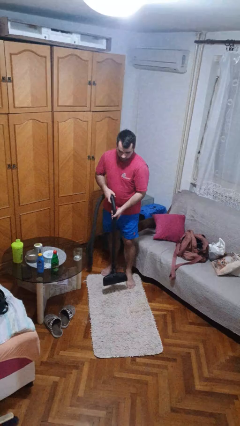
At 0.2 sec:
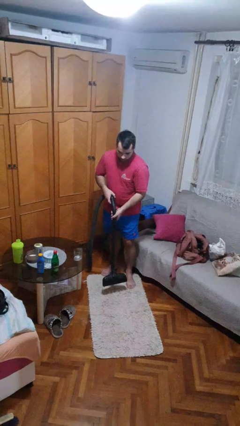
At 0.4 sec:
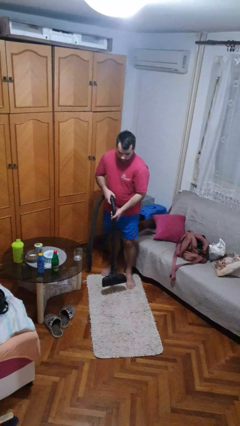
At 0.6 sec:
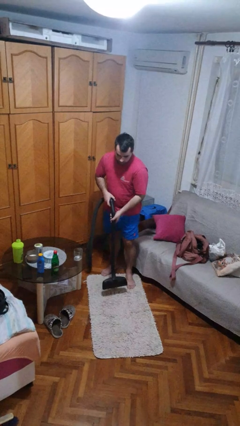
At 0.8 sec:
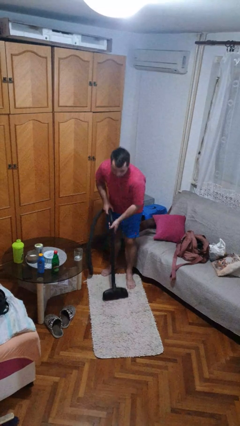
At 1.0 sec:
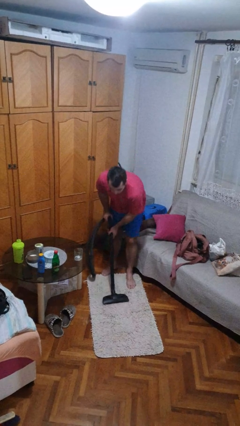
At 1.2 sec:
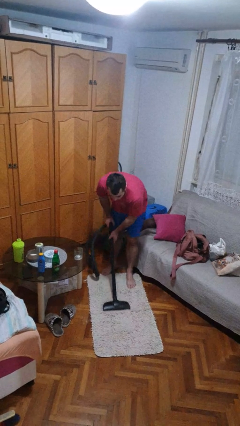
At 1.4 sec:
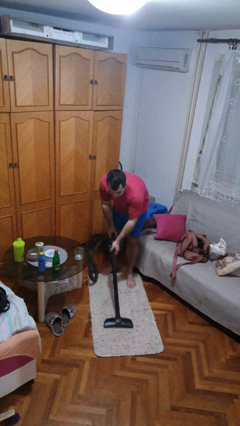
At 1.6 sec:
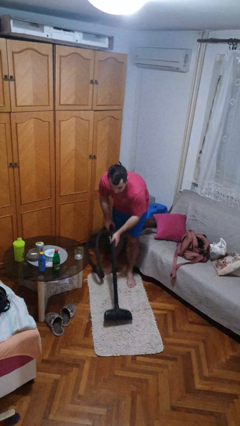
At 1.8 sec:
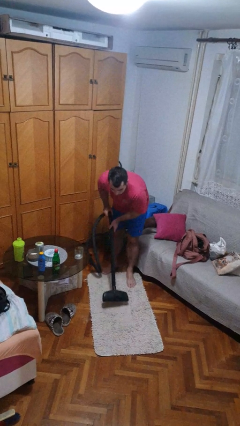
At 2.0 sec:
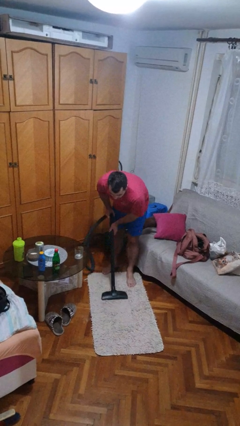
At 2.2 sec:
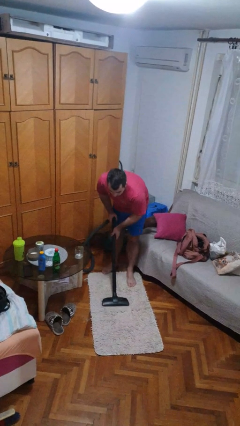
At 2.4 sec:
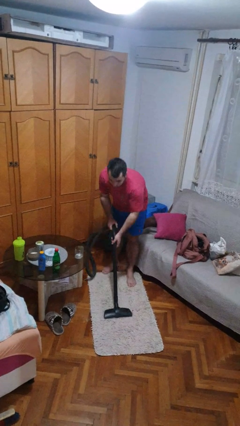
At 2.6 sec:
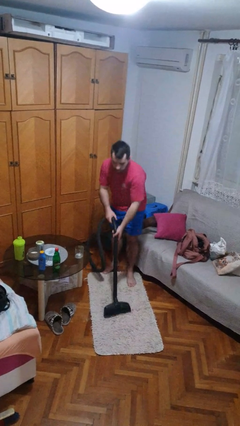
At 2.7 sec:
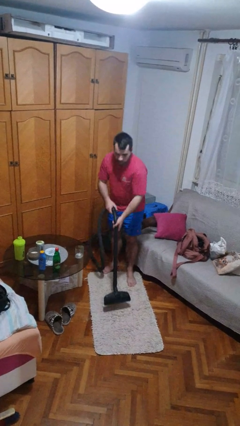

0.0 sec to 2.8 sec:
person vacuums carpet

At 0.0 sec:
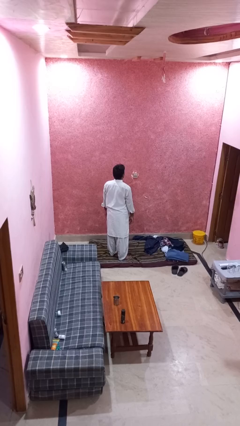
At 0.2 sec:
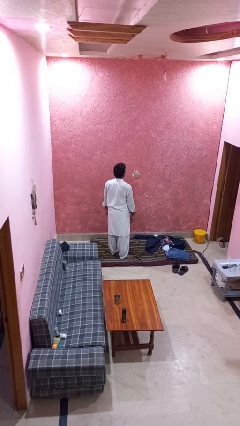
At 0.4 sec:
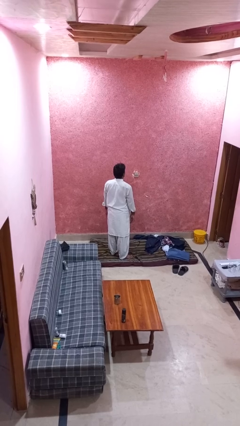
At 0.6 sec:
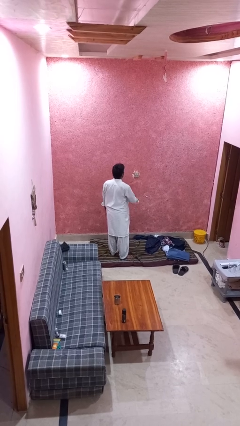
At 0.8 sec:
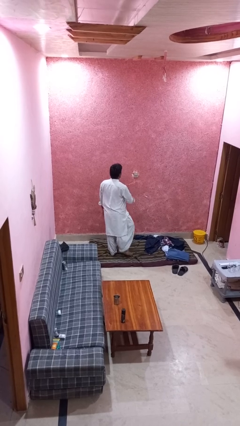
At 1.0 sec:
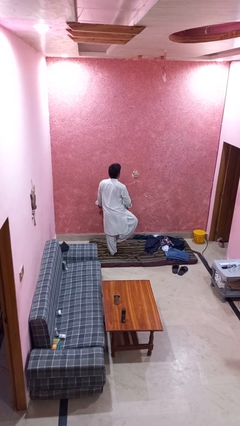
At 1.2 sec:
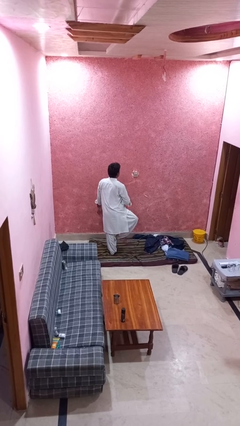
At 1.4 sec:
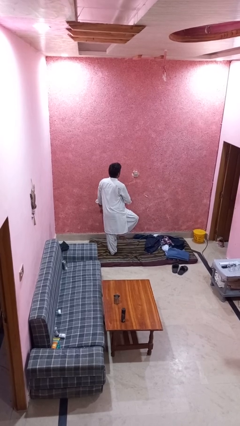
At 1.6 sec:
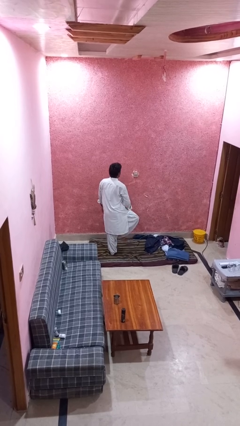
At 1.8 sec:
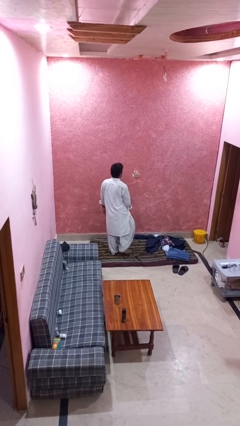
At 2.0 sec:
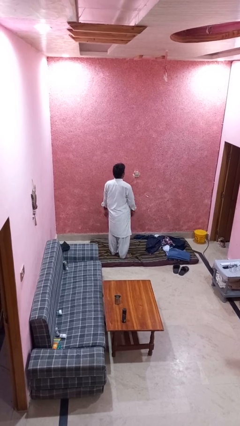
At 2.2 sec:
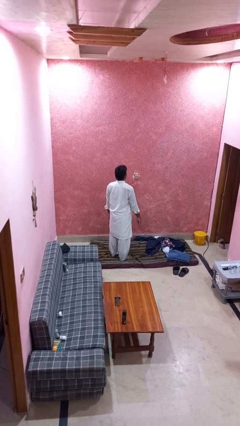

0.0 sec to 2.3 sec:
person slaps hands on thighs

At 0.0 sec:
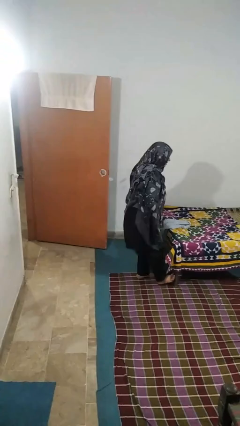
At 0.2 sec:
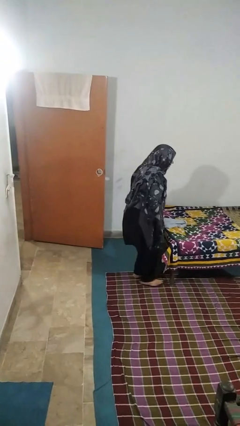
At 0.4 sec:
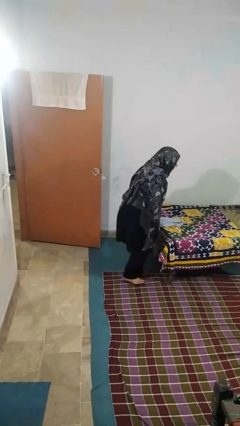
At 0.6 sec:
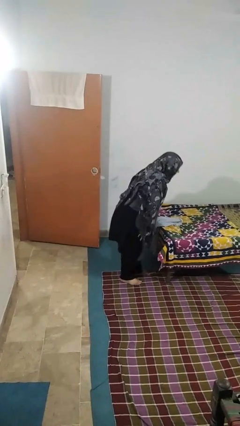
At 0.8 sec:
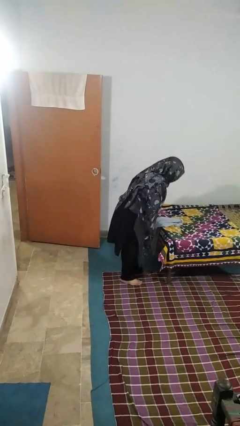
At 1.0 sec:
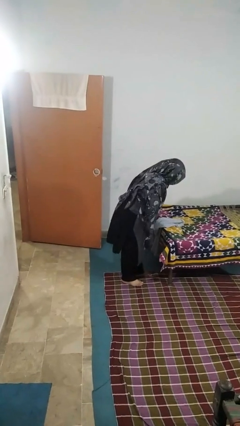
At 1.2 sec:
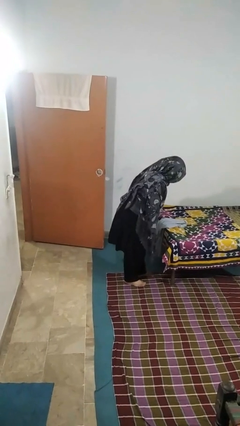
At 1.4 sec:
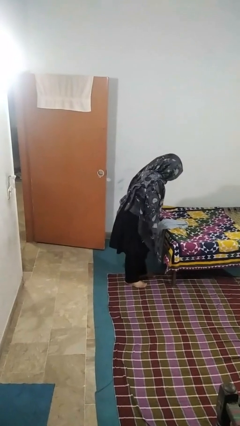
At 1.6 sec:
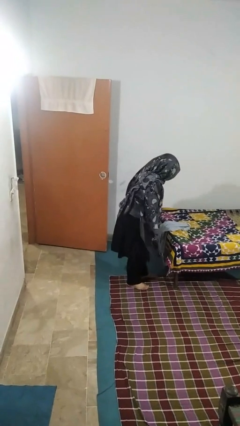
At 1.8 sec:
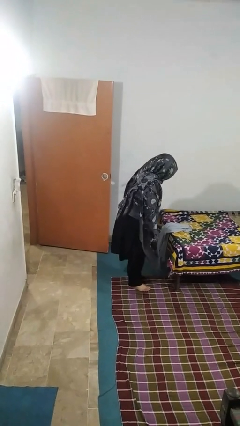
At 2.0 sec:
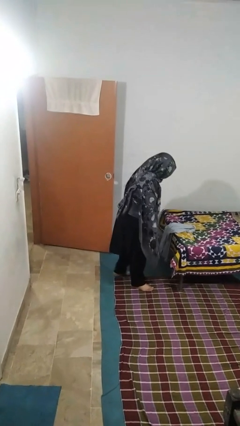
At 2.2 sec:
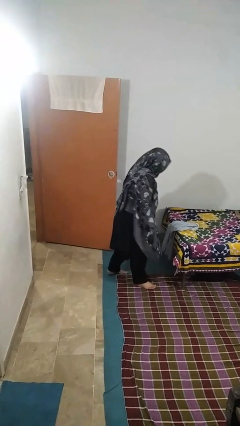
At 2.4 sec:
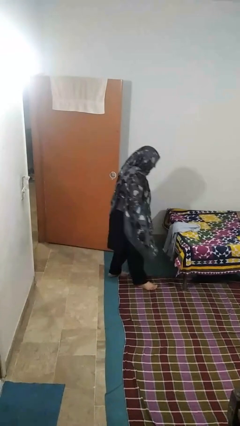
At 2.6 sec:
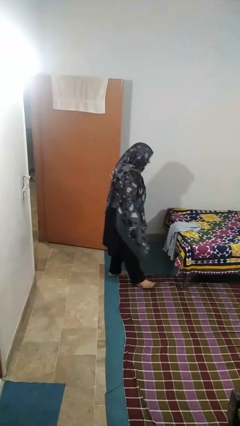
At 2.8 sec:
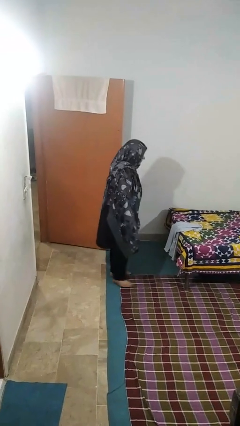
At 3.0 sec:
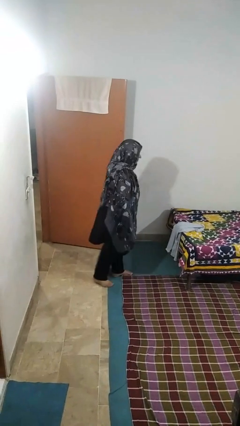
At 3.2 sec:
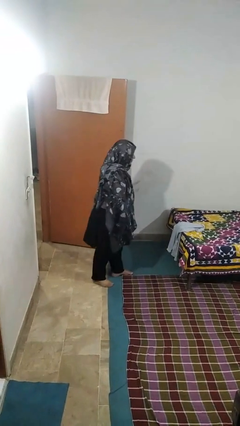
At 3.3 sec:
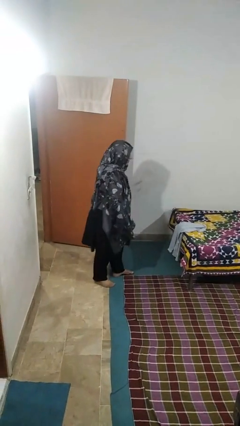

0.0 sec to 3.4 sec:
person stubs toe

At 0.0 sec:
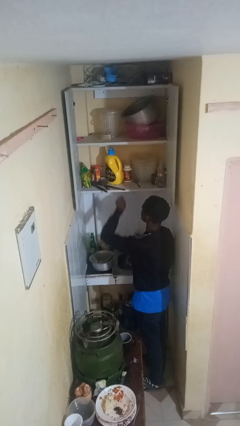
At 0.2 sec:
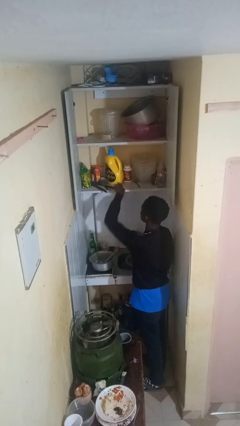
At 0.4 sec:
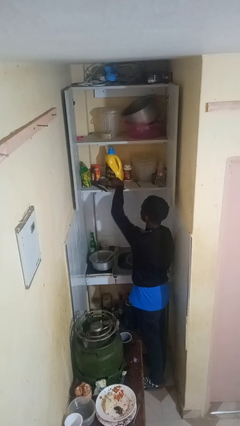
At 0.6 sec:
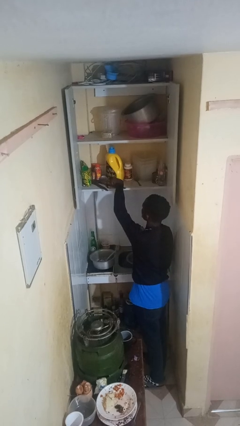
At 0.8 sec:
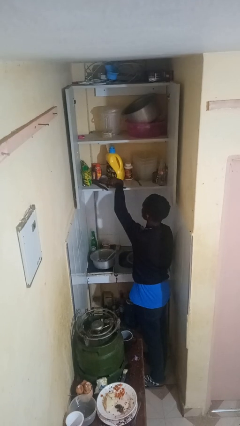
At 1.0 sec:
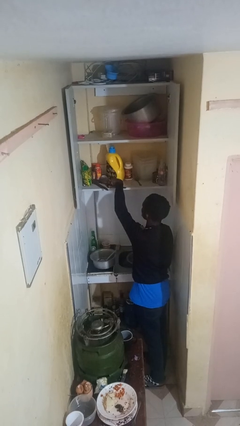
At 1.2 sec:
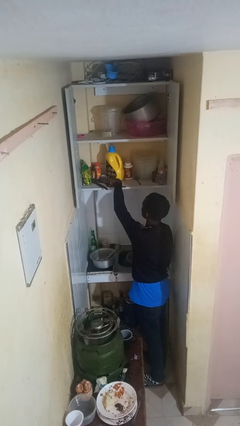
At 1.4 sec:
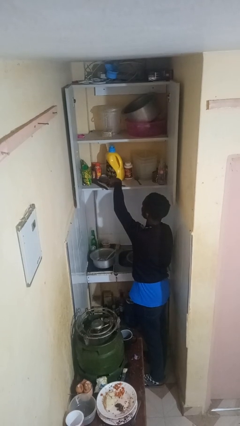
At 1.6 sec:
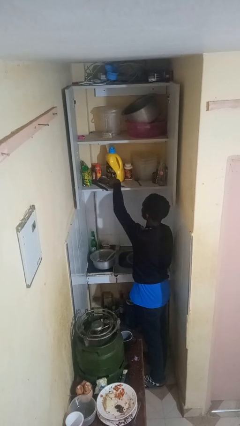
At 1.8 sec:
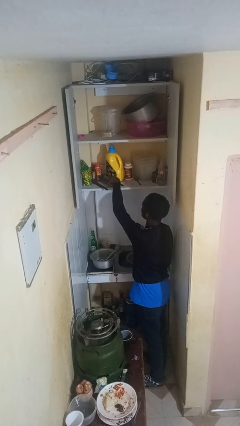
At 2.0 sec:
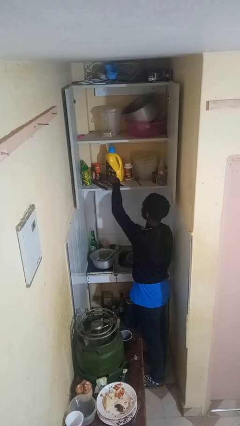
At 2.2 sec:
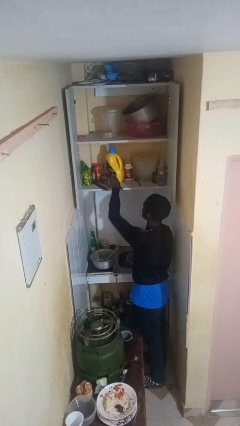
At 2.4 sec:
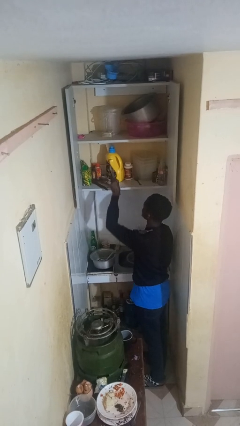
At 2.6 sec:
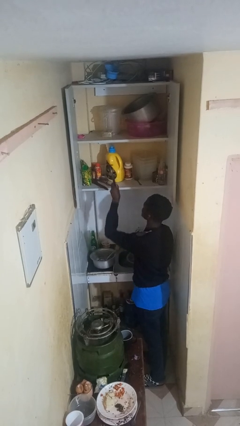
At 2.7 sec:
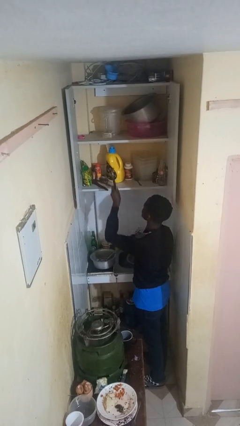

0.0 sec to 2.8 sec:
person takes object from kitchen drawer

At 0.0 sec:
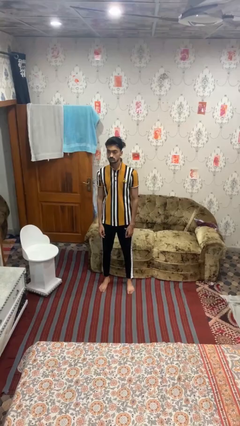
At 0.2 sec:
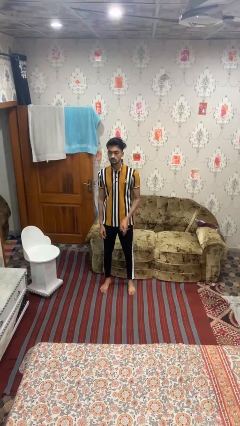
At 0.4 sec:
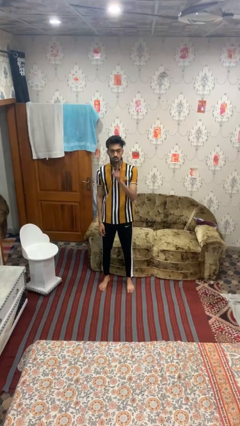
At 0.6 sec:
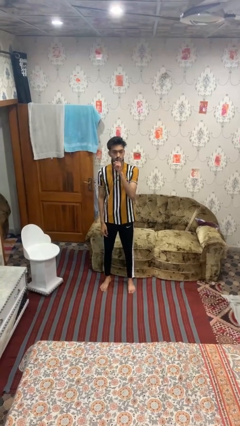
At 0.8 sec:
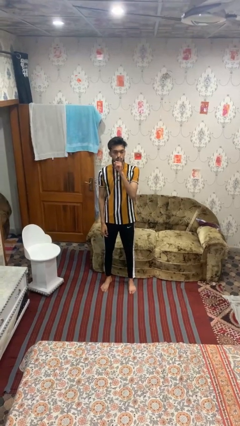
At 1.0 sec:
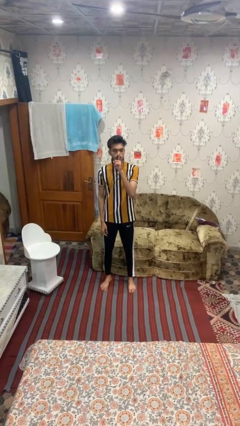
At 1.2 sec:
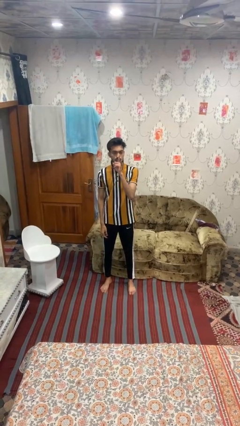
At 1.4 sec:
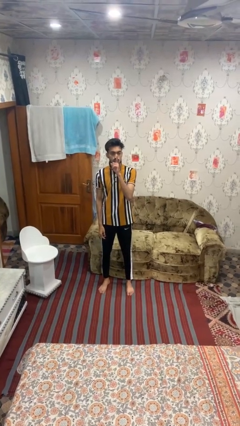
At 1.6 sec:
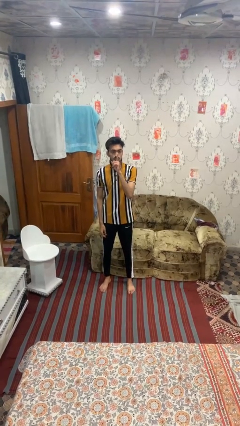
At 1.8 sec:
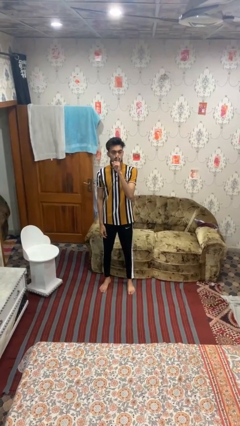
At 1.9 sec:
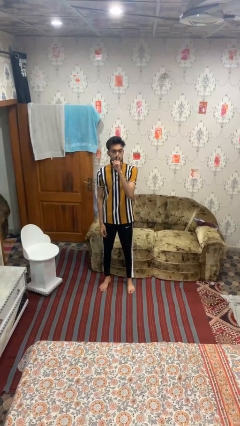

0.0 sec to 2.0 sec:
person gestures be quiet

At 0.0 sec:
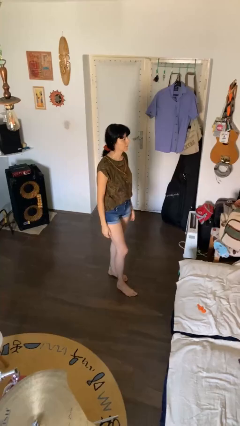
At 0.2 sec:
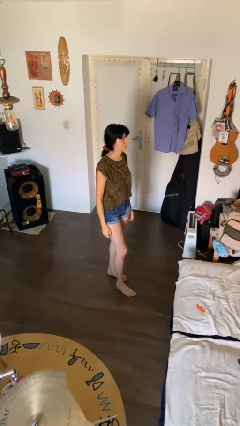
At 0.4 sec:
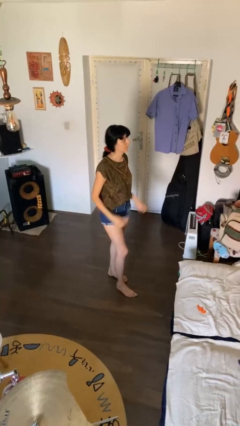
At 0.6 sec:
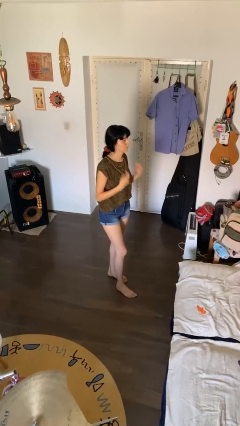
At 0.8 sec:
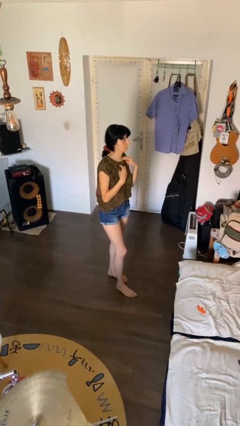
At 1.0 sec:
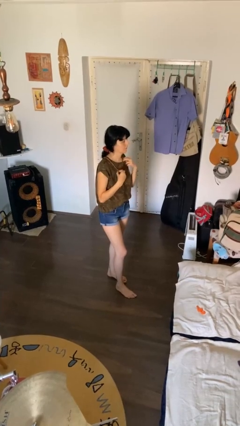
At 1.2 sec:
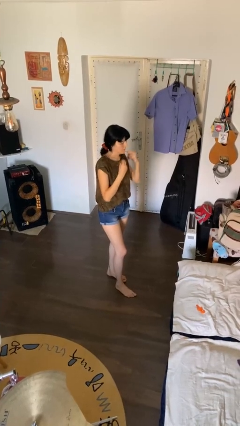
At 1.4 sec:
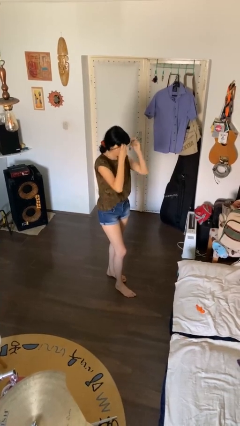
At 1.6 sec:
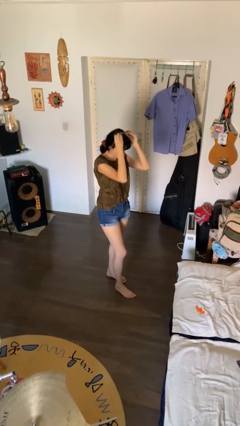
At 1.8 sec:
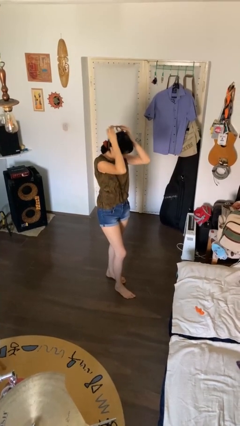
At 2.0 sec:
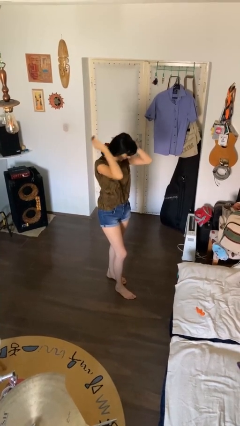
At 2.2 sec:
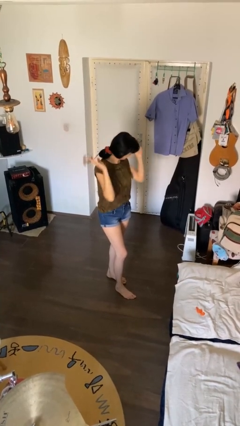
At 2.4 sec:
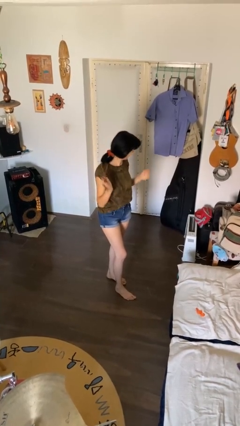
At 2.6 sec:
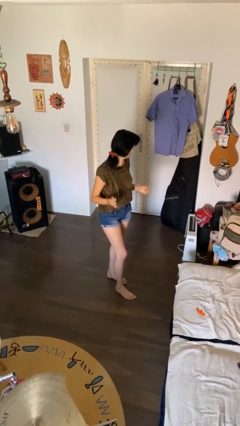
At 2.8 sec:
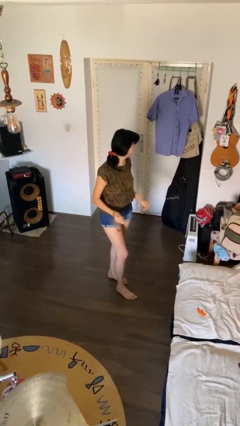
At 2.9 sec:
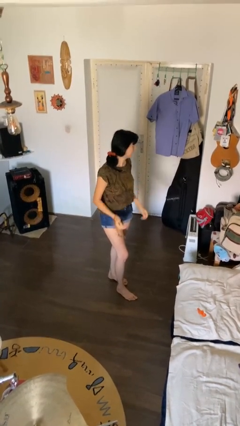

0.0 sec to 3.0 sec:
person takes off necklace

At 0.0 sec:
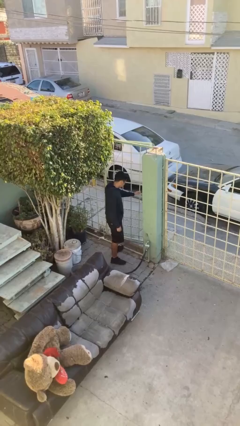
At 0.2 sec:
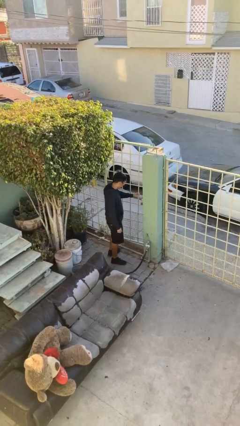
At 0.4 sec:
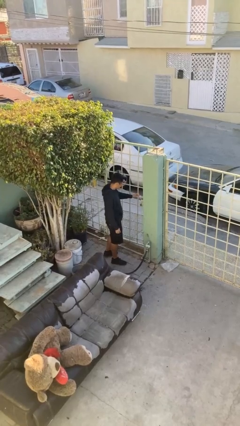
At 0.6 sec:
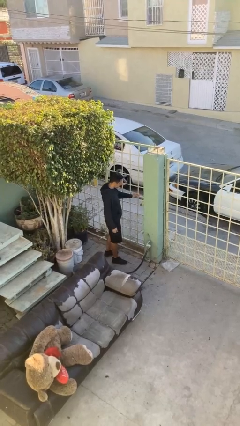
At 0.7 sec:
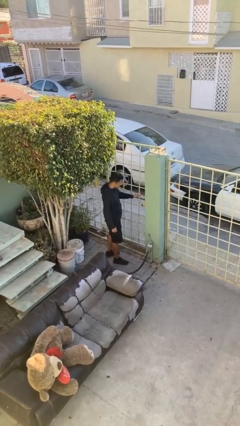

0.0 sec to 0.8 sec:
person closes facility door

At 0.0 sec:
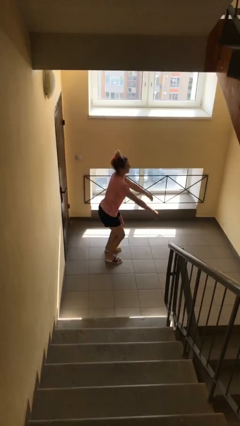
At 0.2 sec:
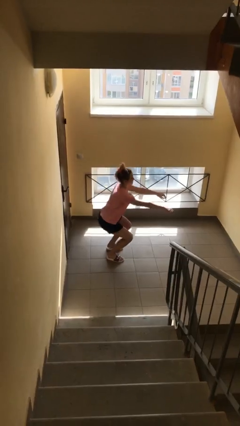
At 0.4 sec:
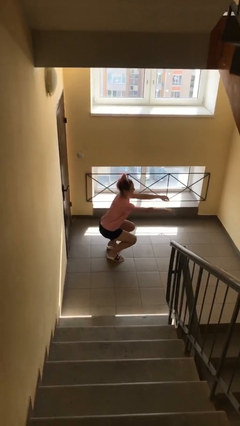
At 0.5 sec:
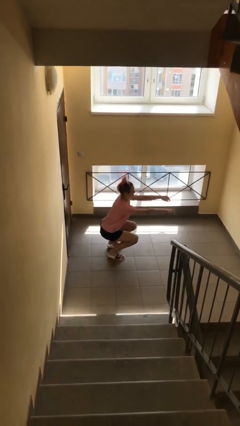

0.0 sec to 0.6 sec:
person squats
